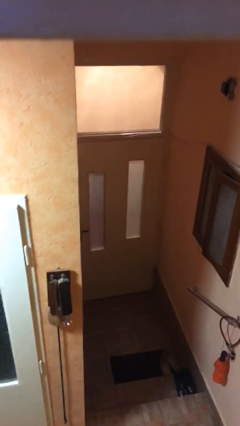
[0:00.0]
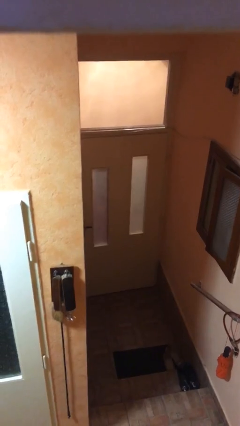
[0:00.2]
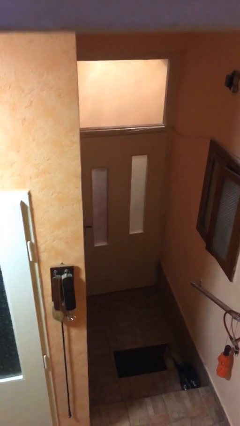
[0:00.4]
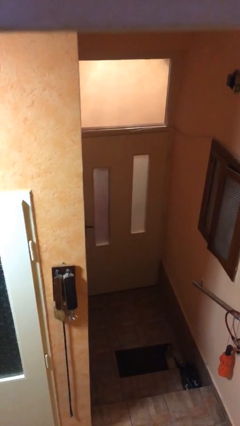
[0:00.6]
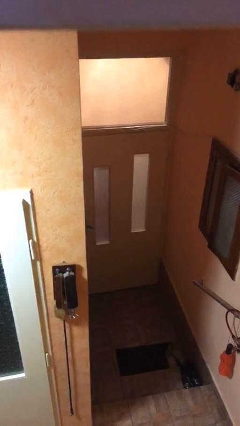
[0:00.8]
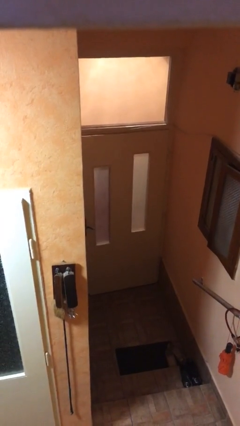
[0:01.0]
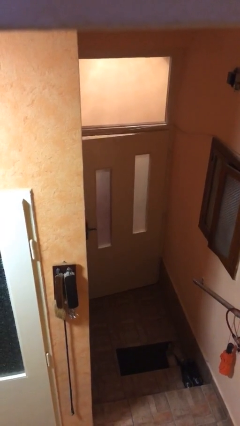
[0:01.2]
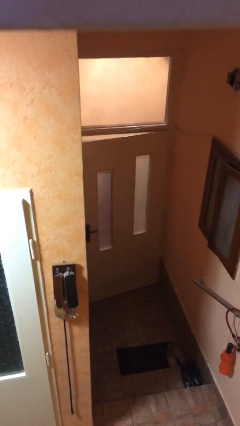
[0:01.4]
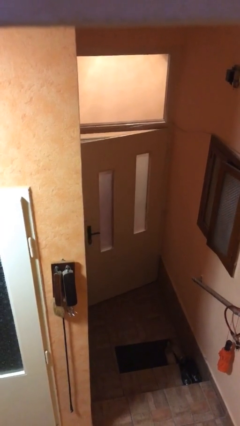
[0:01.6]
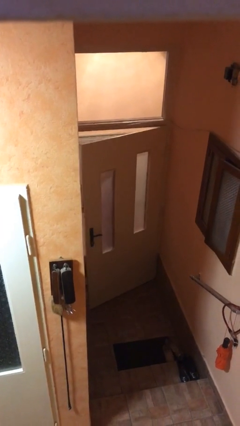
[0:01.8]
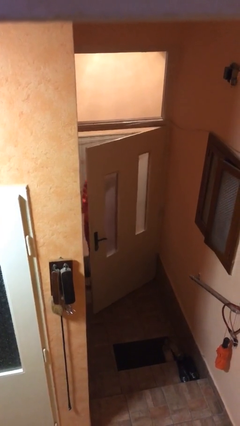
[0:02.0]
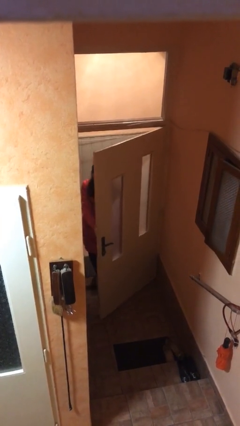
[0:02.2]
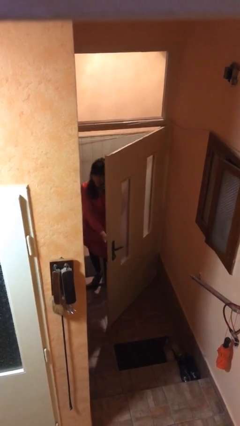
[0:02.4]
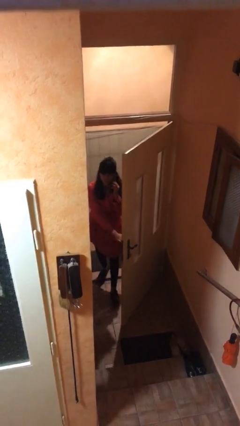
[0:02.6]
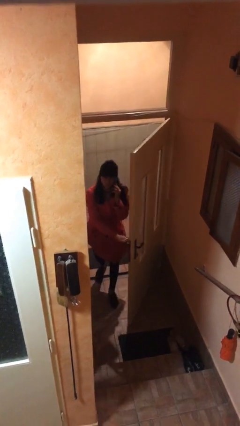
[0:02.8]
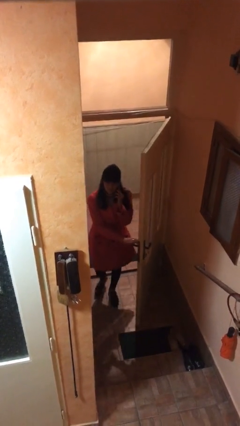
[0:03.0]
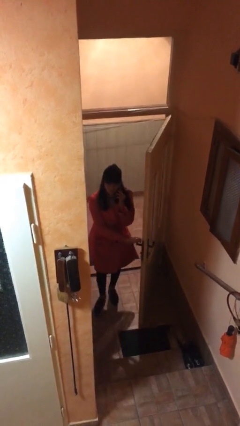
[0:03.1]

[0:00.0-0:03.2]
person opens facility door

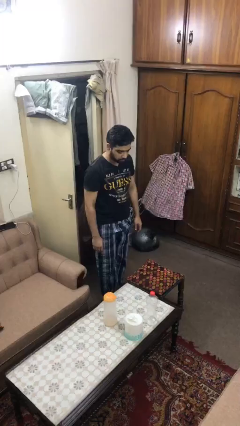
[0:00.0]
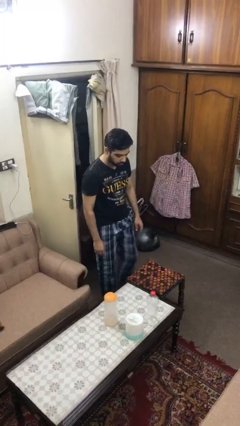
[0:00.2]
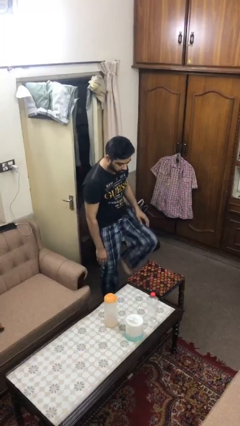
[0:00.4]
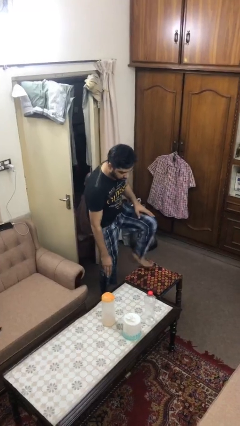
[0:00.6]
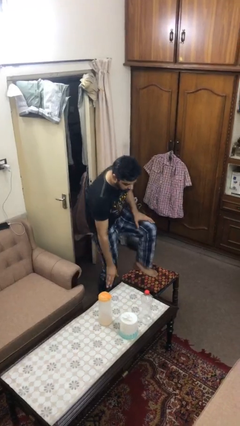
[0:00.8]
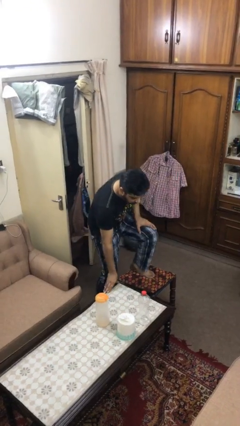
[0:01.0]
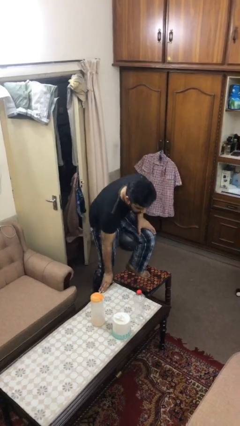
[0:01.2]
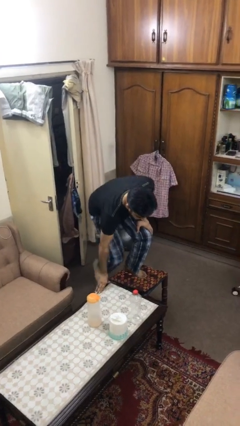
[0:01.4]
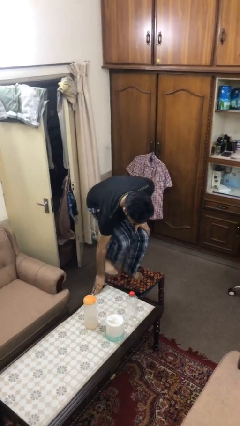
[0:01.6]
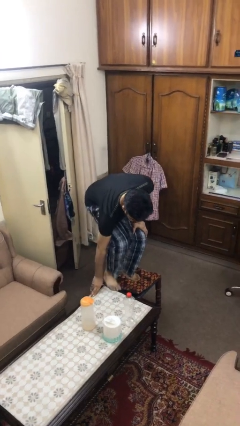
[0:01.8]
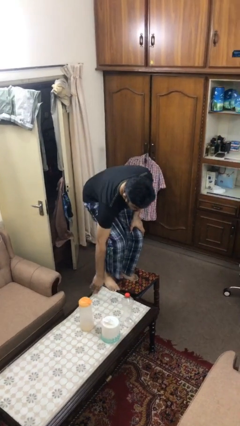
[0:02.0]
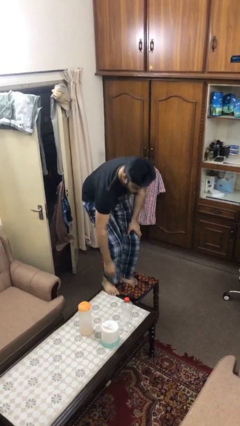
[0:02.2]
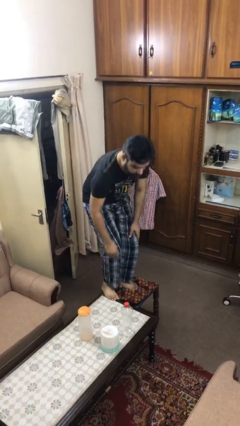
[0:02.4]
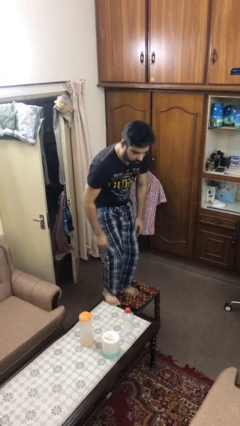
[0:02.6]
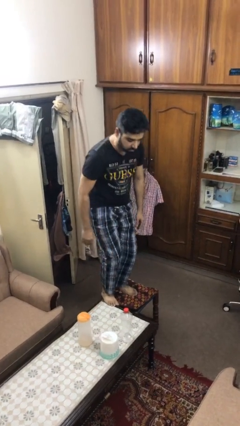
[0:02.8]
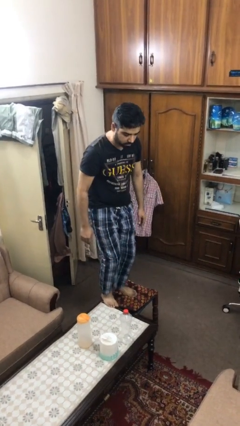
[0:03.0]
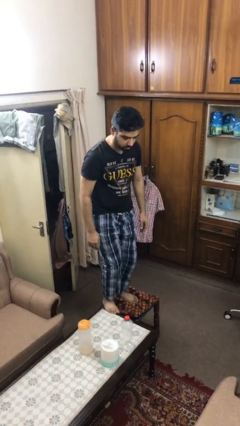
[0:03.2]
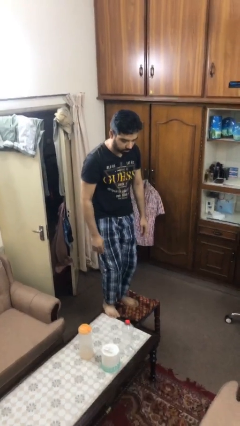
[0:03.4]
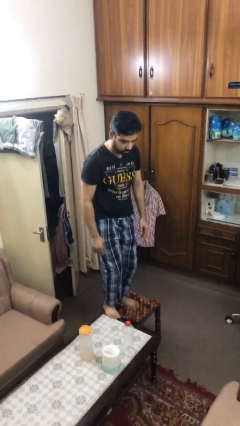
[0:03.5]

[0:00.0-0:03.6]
person climbs on table

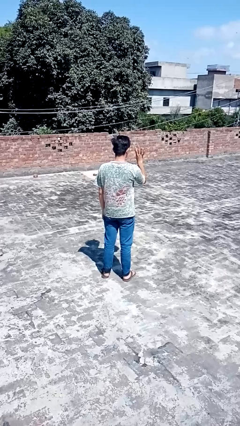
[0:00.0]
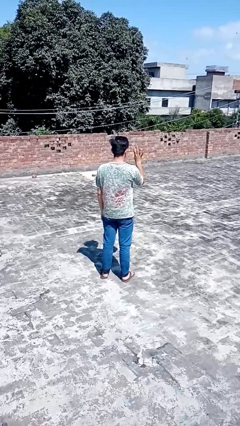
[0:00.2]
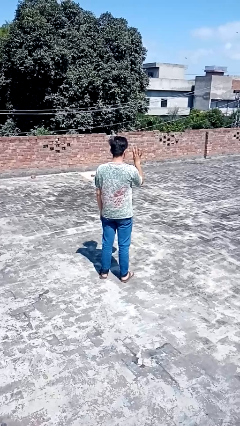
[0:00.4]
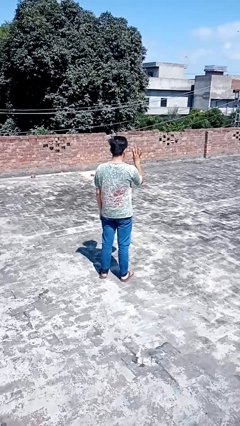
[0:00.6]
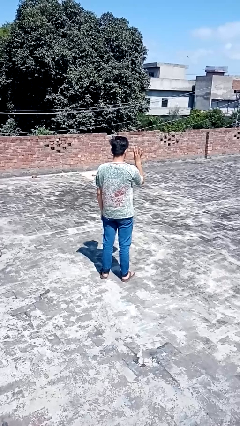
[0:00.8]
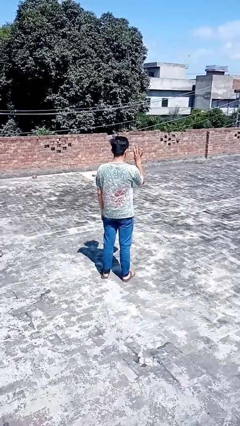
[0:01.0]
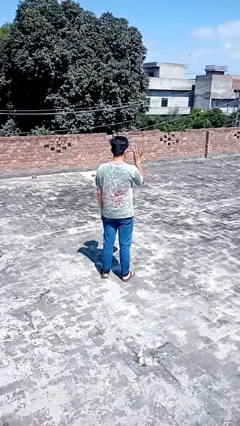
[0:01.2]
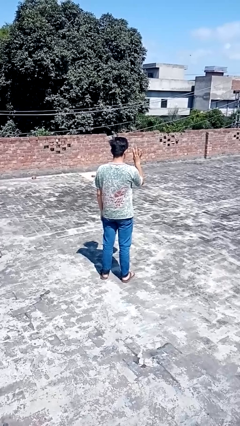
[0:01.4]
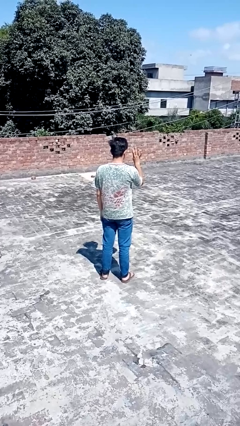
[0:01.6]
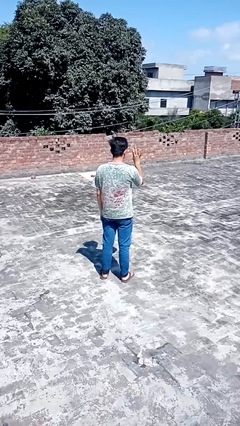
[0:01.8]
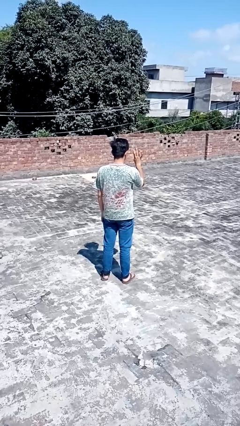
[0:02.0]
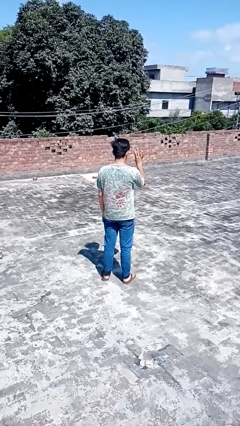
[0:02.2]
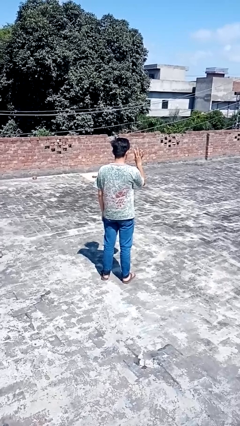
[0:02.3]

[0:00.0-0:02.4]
person gestures number four

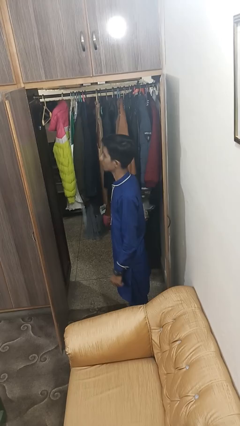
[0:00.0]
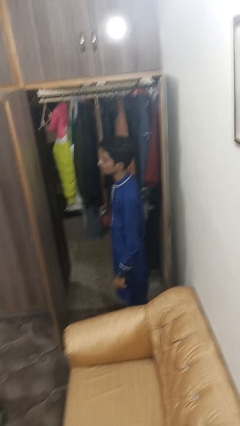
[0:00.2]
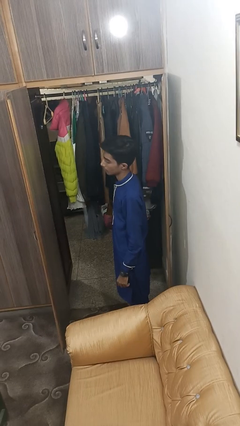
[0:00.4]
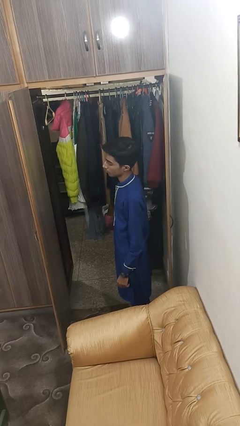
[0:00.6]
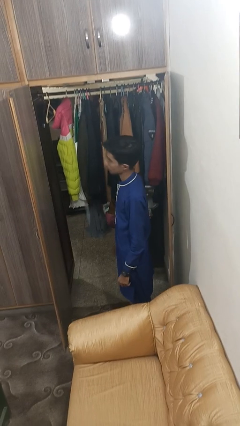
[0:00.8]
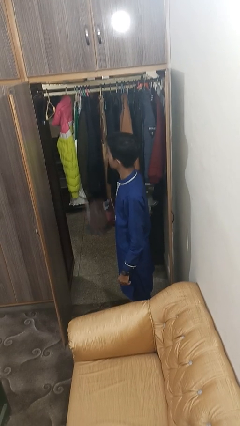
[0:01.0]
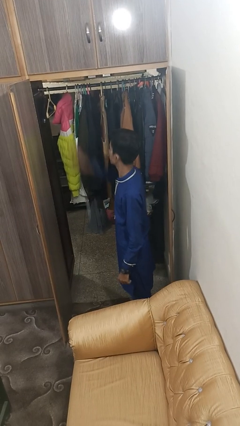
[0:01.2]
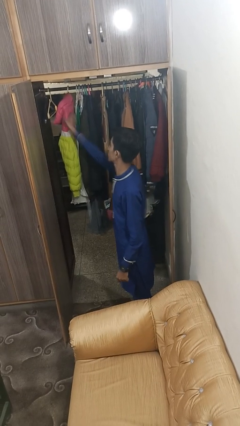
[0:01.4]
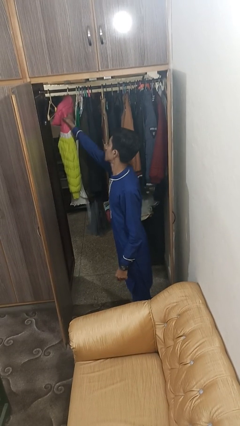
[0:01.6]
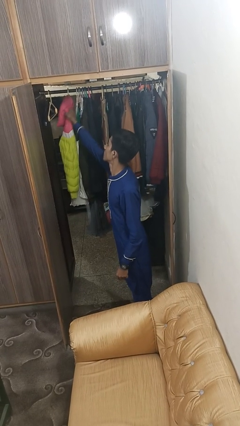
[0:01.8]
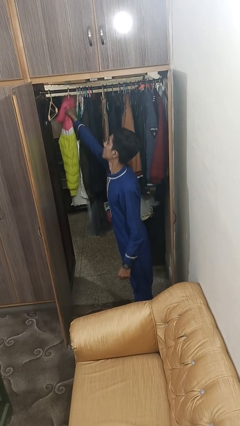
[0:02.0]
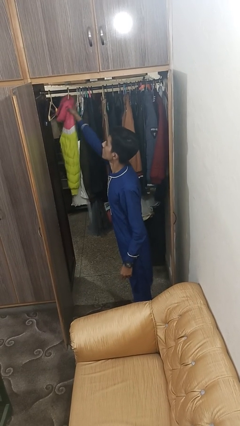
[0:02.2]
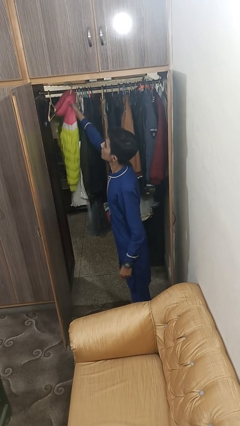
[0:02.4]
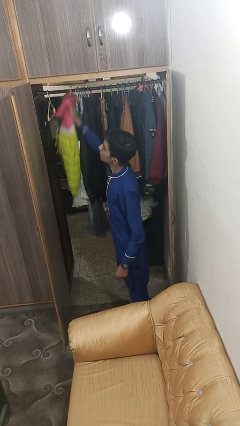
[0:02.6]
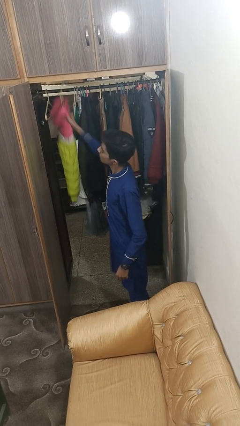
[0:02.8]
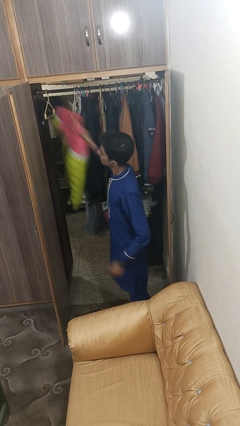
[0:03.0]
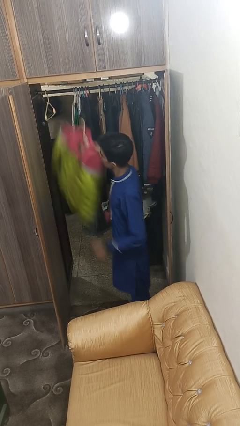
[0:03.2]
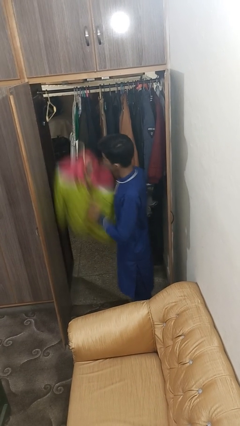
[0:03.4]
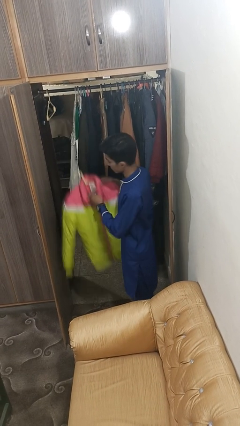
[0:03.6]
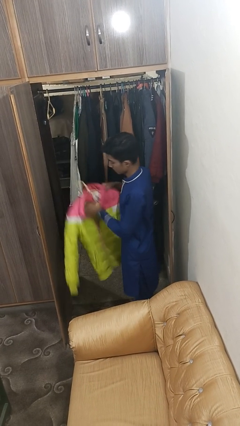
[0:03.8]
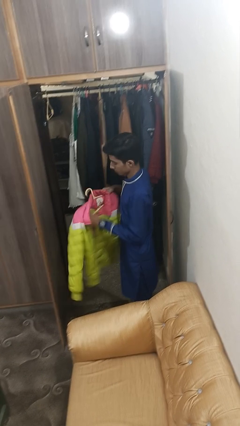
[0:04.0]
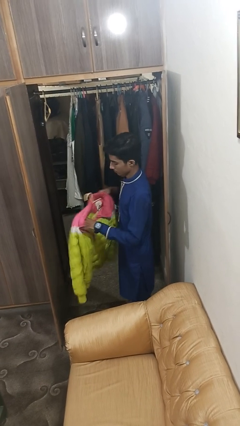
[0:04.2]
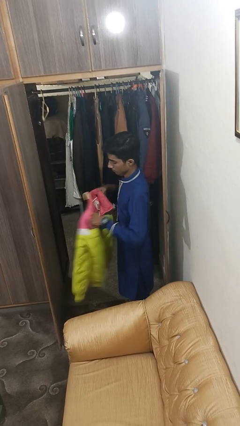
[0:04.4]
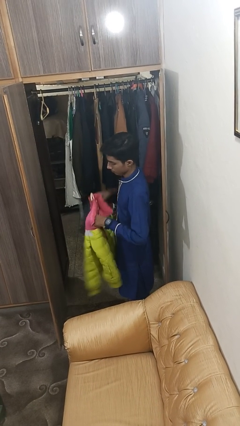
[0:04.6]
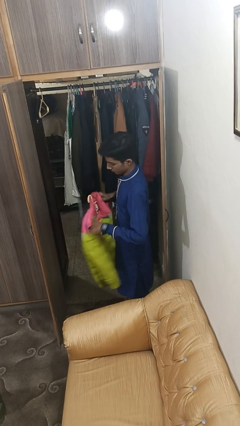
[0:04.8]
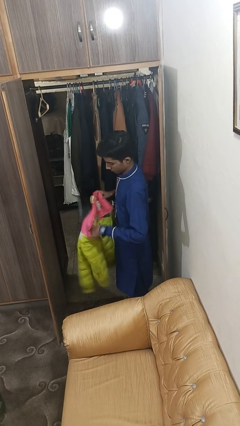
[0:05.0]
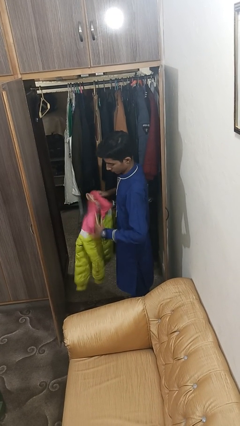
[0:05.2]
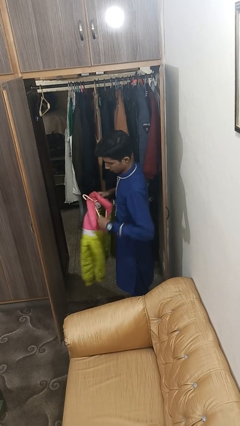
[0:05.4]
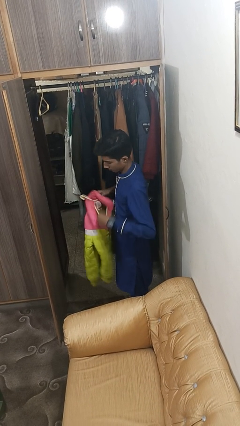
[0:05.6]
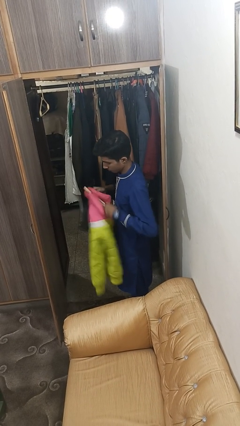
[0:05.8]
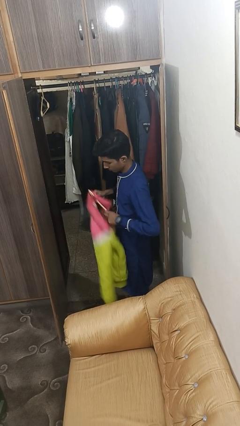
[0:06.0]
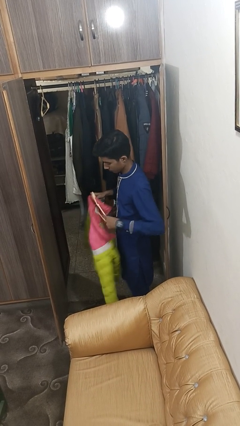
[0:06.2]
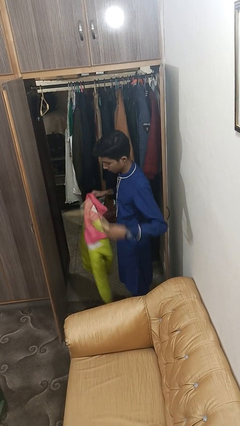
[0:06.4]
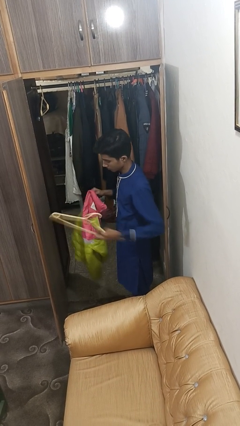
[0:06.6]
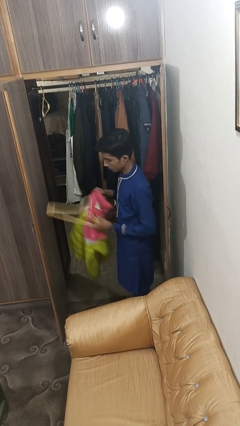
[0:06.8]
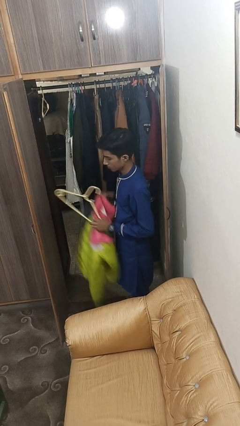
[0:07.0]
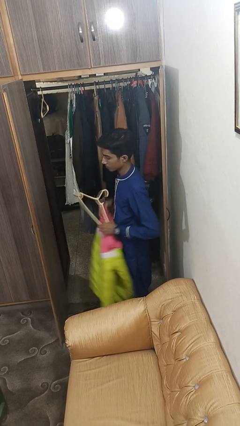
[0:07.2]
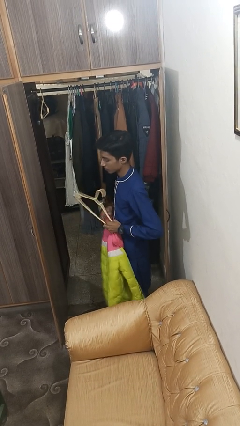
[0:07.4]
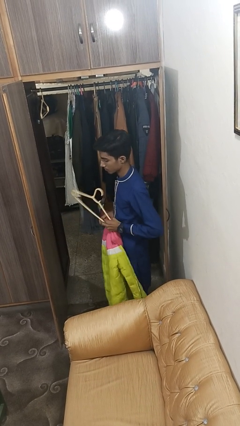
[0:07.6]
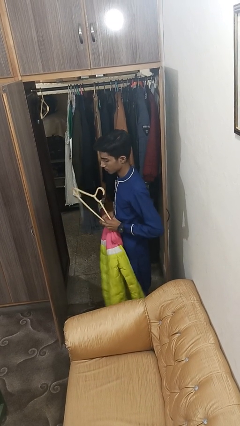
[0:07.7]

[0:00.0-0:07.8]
person takes clothes from closet

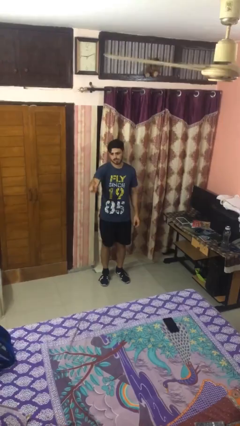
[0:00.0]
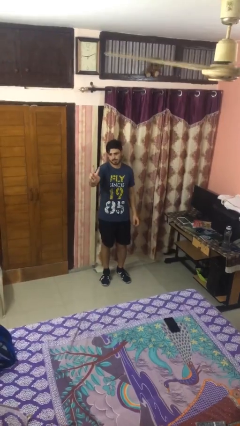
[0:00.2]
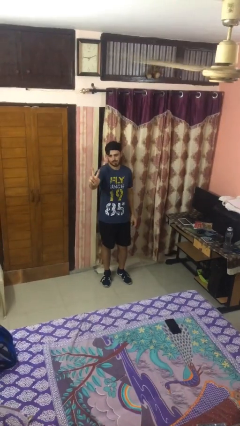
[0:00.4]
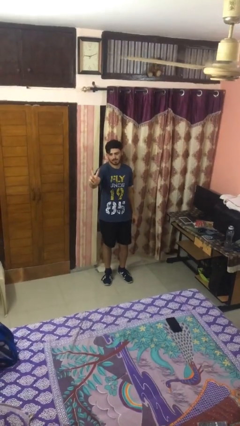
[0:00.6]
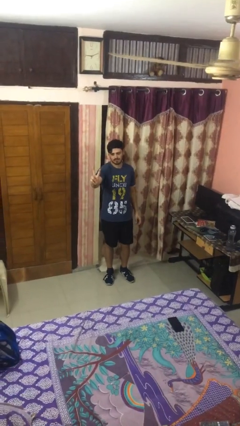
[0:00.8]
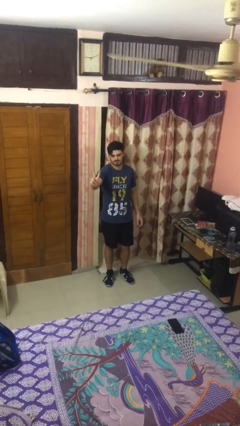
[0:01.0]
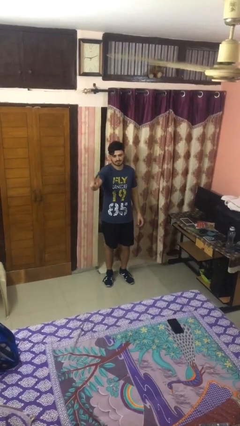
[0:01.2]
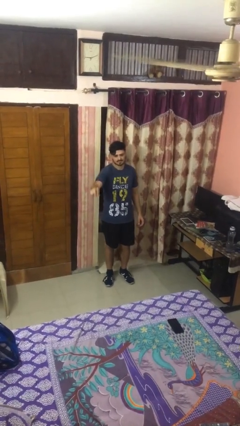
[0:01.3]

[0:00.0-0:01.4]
person gestures peace
